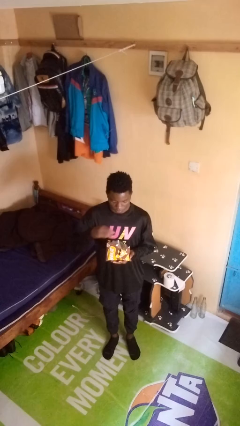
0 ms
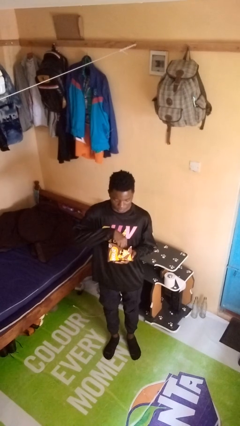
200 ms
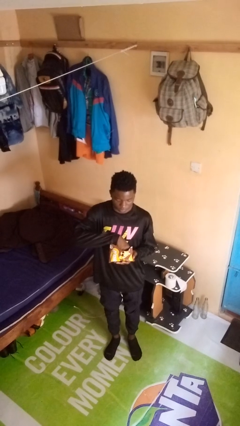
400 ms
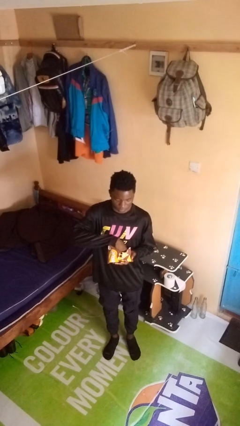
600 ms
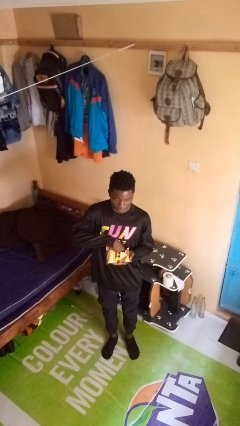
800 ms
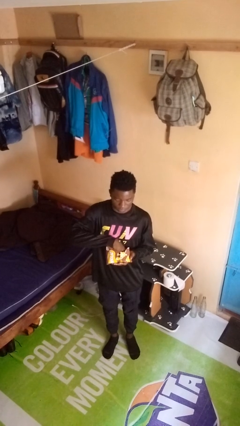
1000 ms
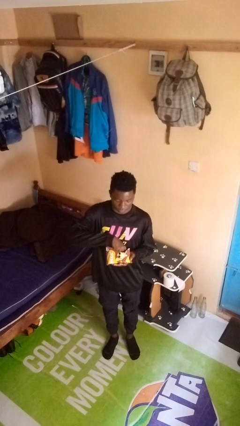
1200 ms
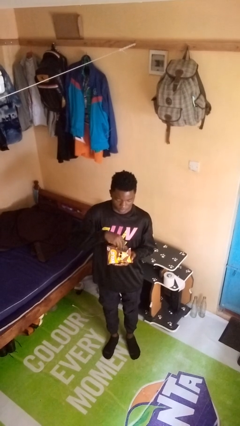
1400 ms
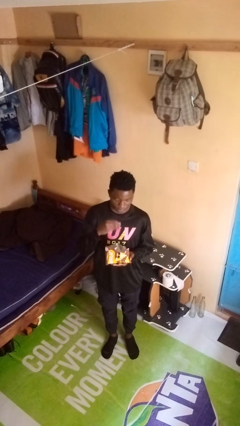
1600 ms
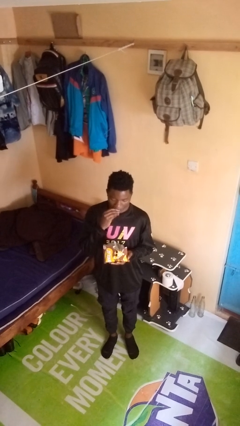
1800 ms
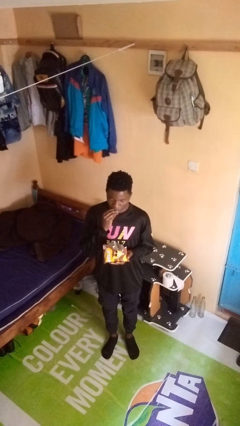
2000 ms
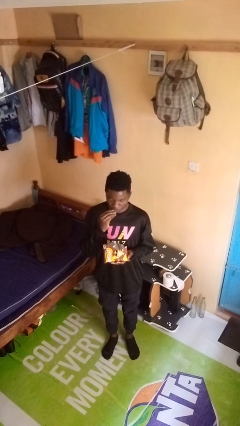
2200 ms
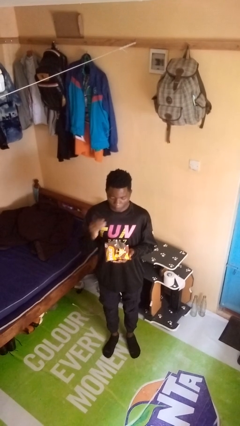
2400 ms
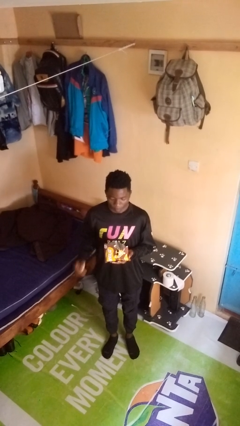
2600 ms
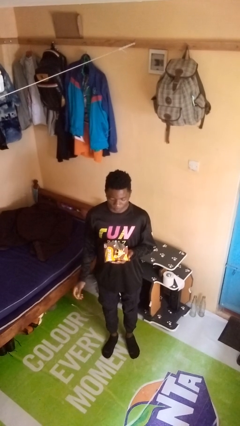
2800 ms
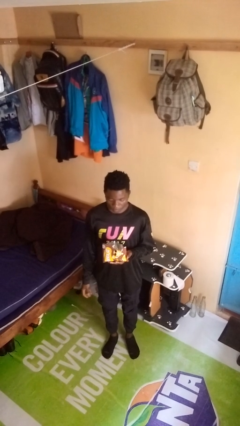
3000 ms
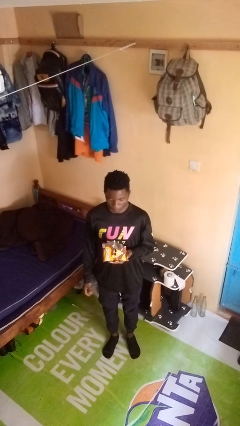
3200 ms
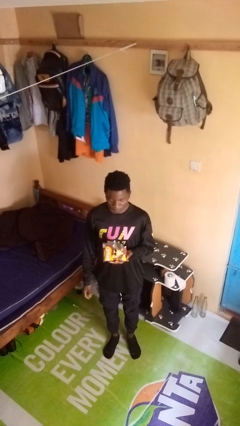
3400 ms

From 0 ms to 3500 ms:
person eats snack from bag

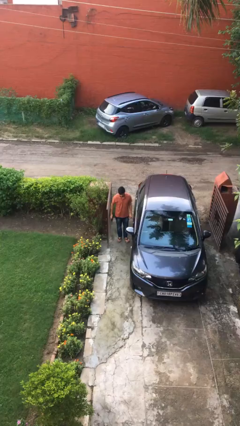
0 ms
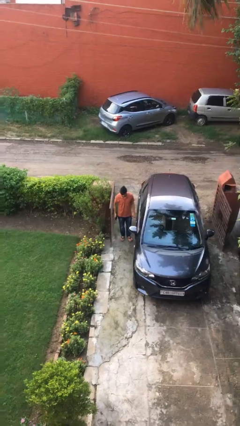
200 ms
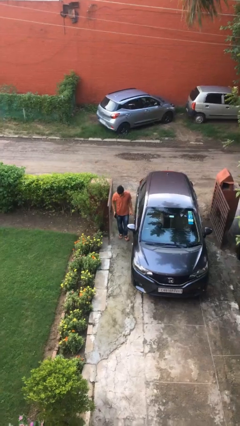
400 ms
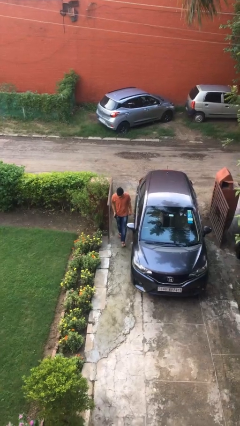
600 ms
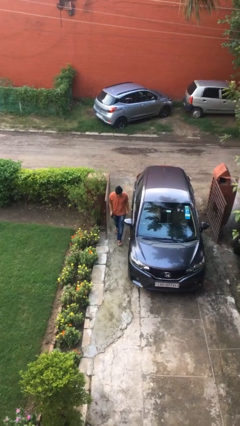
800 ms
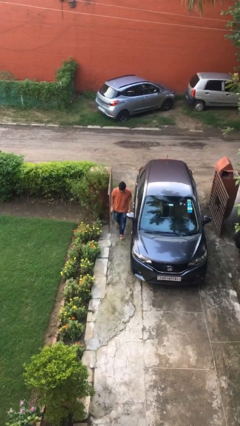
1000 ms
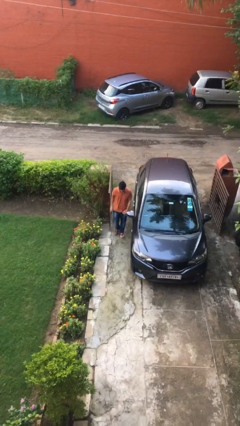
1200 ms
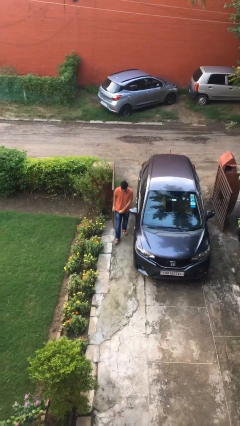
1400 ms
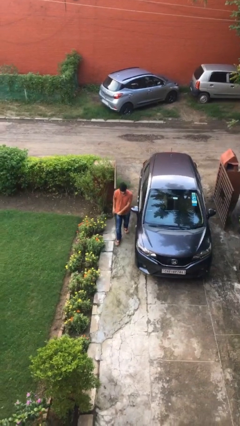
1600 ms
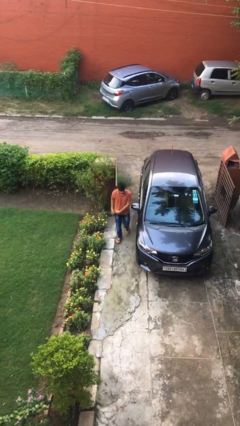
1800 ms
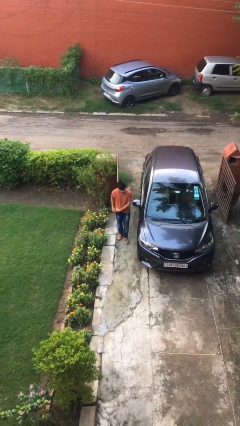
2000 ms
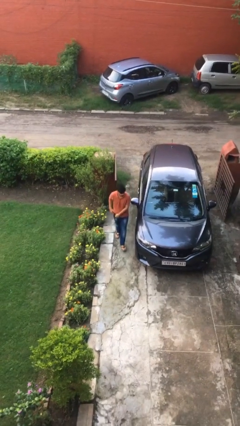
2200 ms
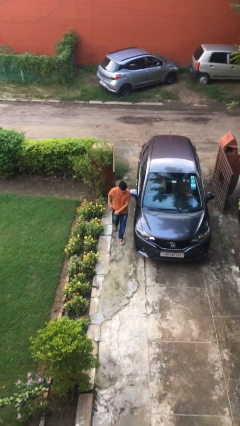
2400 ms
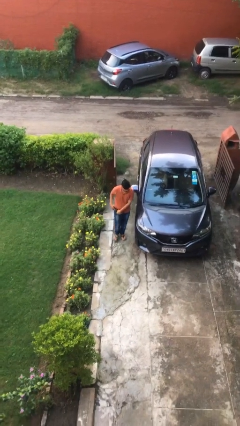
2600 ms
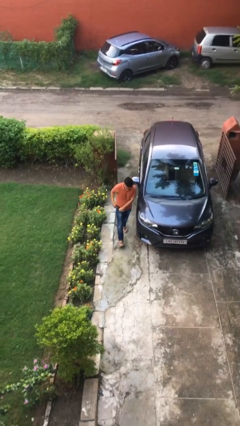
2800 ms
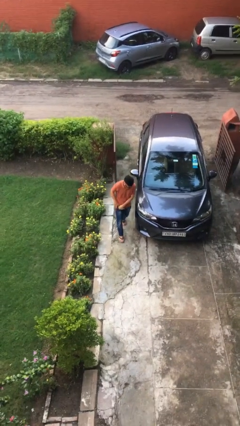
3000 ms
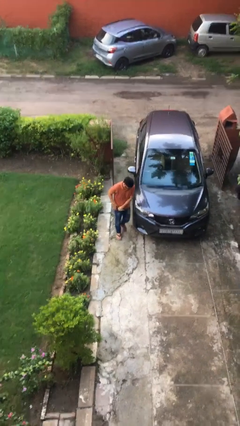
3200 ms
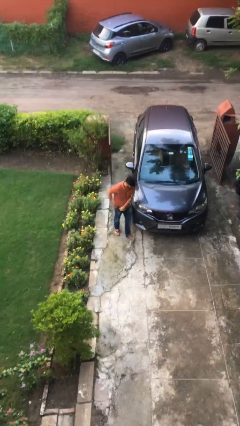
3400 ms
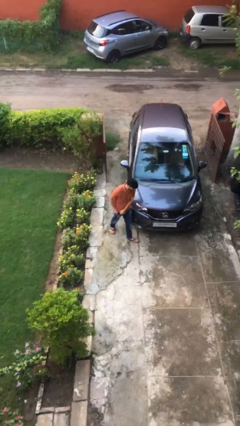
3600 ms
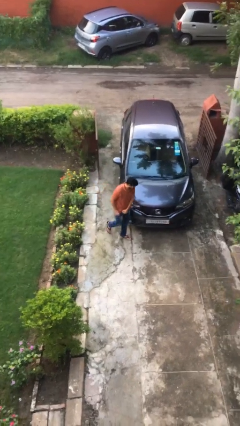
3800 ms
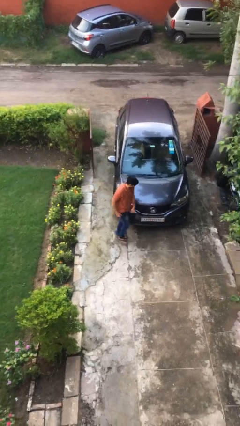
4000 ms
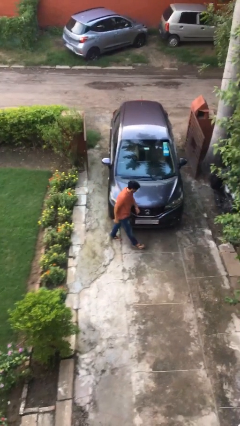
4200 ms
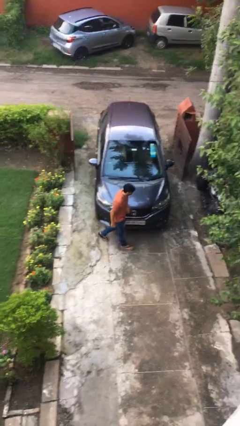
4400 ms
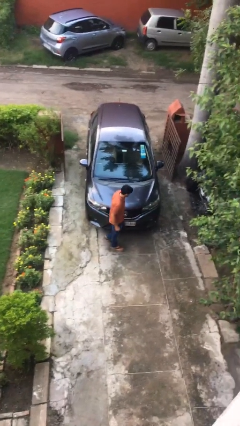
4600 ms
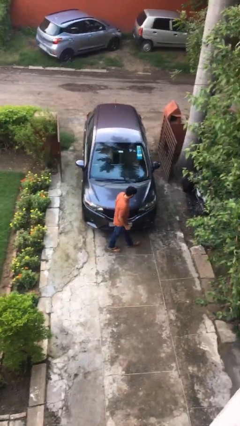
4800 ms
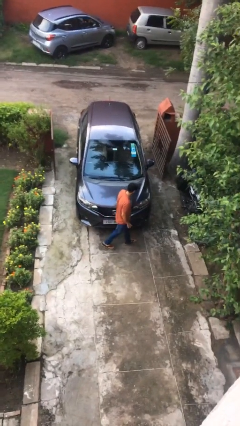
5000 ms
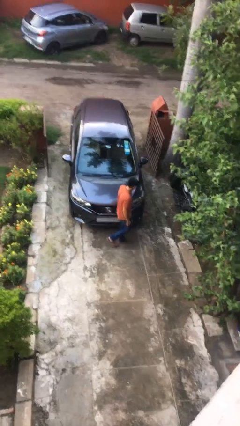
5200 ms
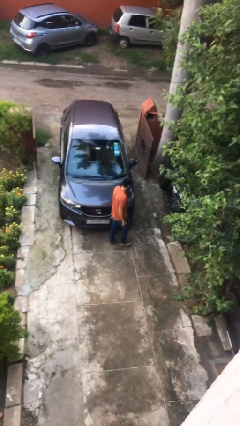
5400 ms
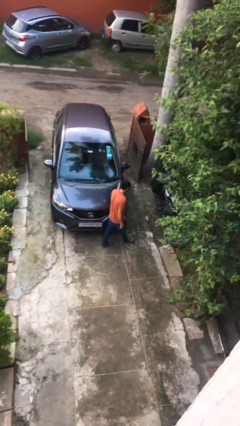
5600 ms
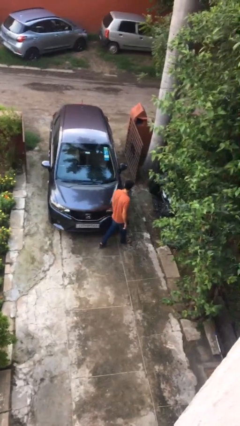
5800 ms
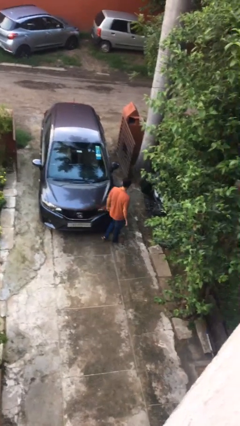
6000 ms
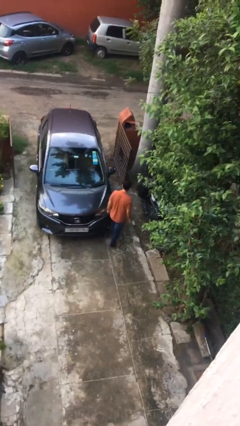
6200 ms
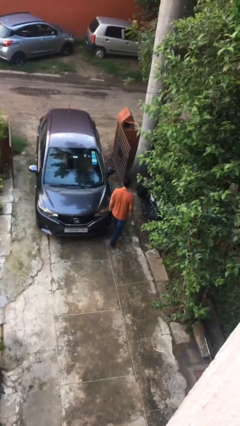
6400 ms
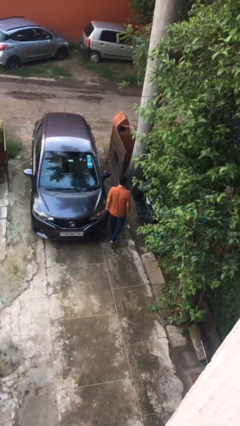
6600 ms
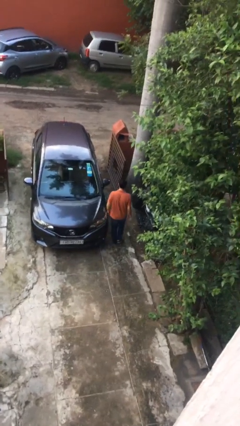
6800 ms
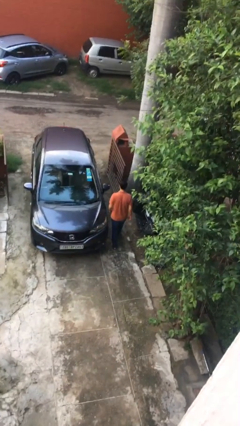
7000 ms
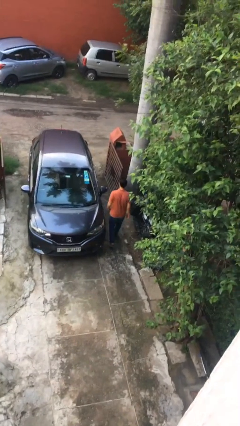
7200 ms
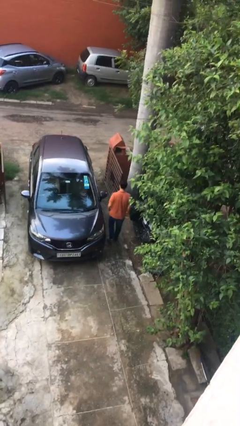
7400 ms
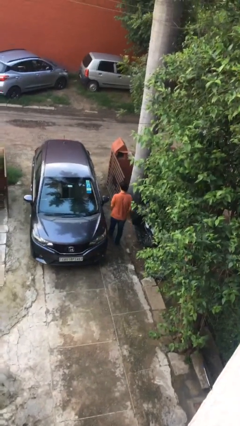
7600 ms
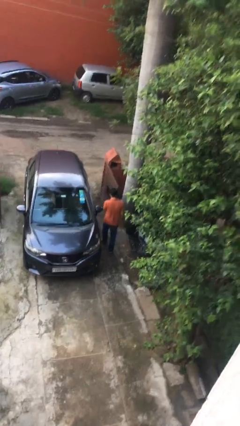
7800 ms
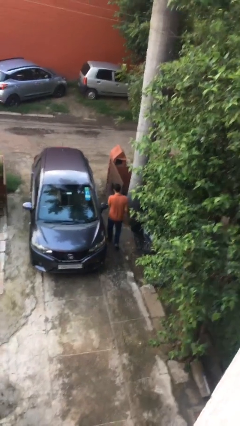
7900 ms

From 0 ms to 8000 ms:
person walks around car

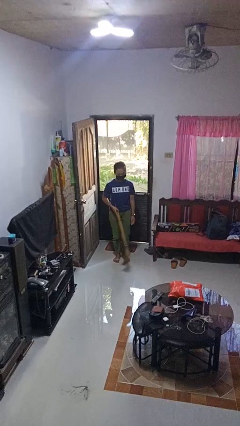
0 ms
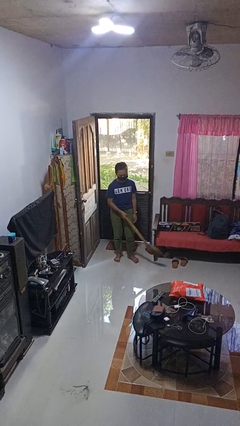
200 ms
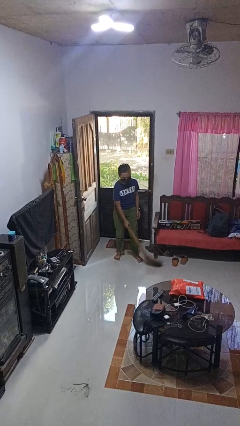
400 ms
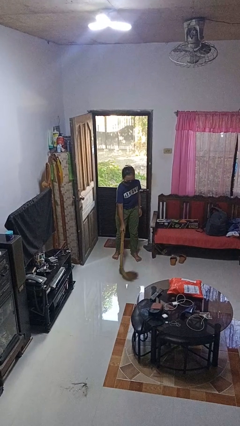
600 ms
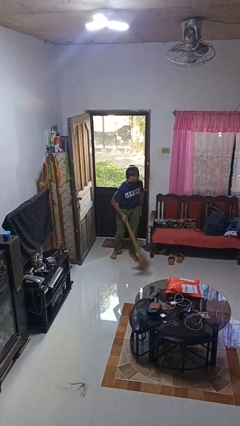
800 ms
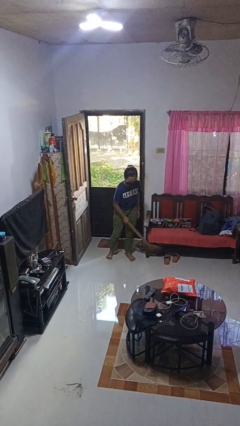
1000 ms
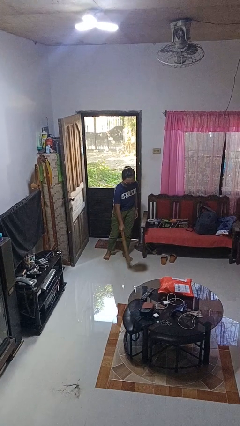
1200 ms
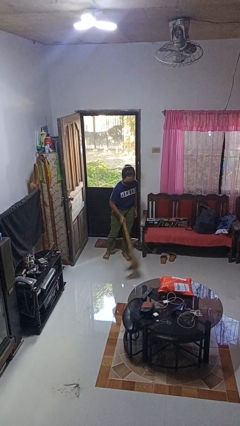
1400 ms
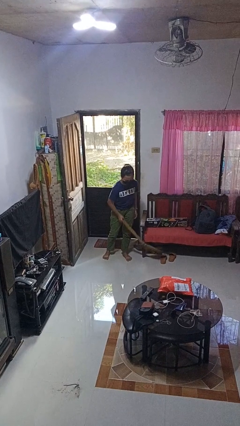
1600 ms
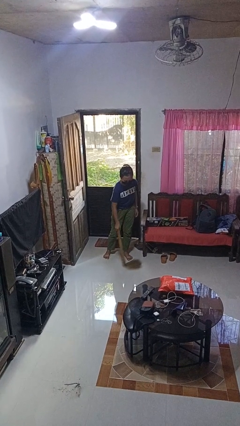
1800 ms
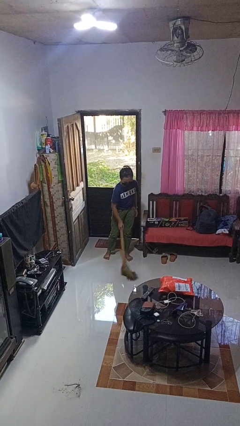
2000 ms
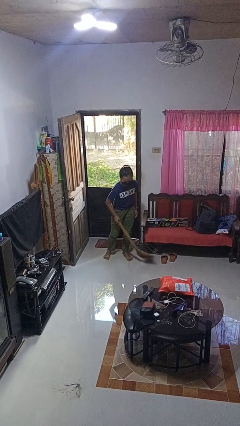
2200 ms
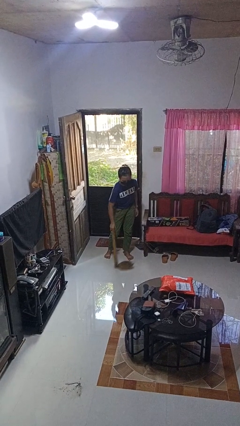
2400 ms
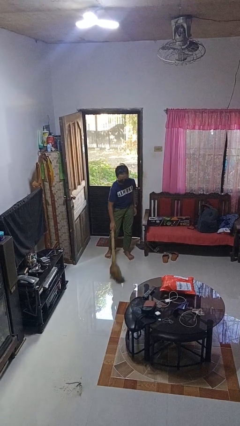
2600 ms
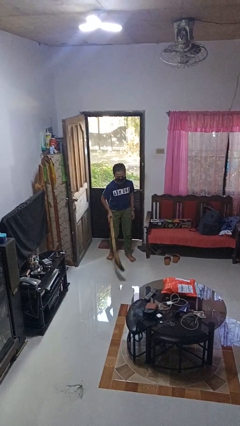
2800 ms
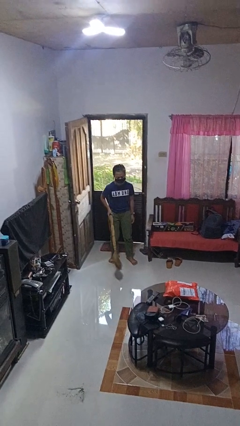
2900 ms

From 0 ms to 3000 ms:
person sweeps floor

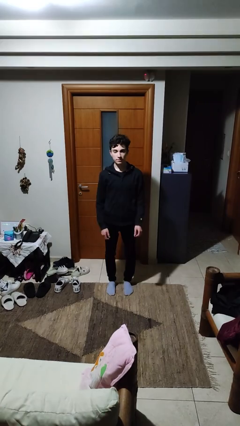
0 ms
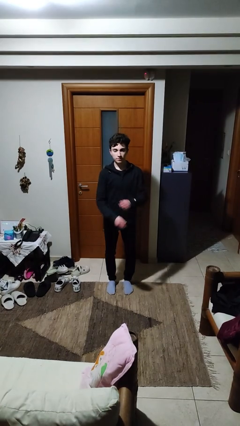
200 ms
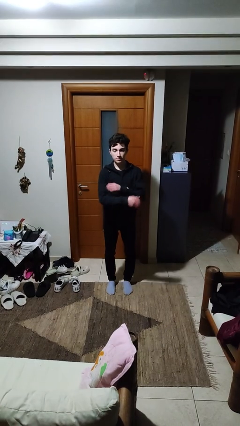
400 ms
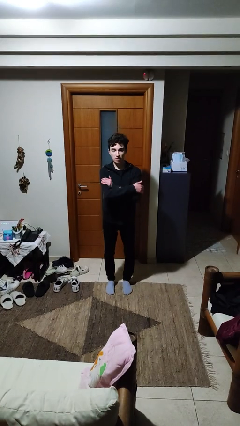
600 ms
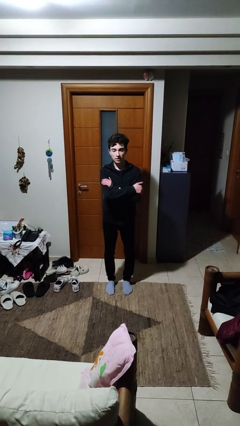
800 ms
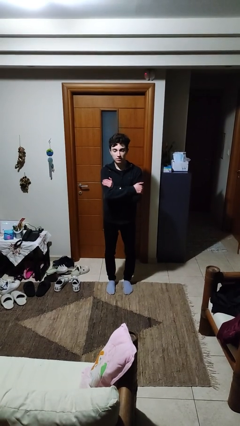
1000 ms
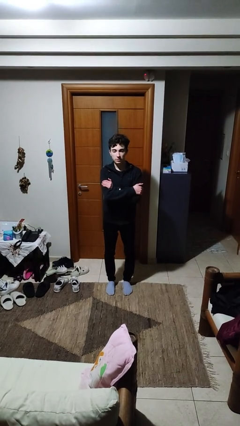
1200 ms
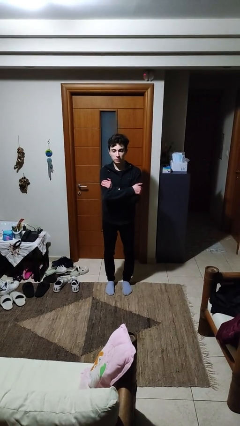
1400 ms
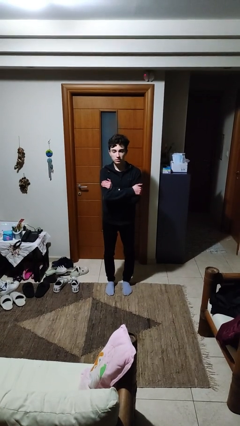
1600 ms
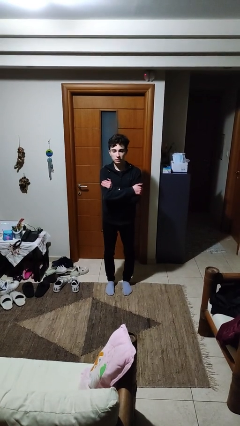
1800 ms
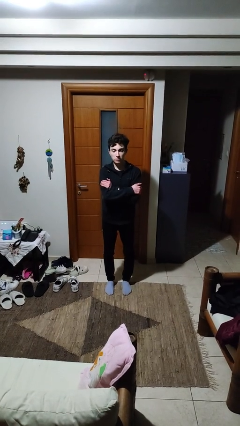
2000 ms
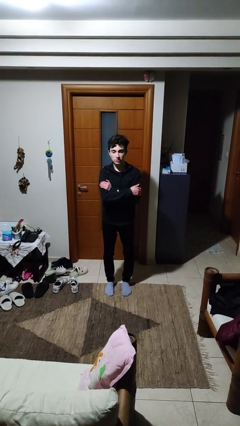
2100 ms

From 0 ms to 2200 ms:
person crosses arms

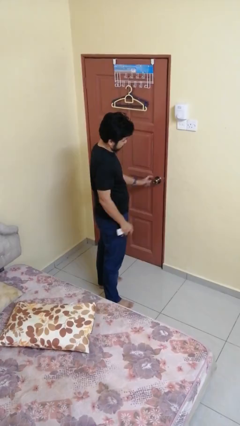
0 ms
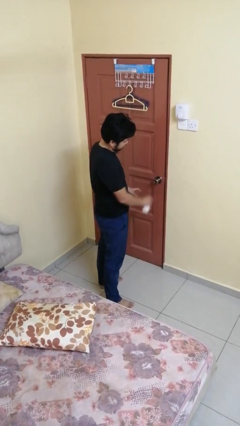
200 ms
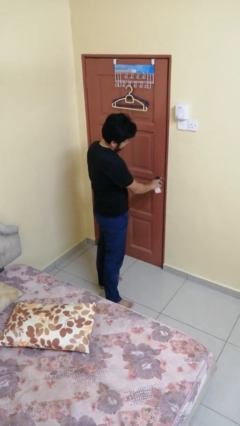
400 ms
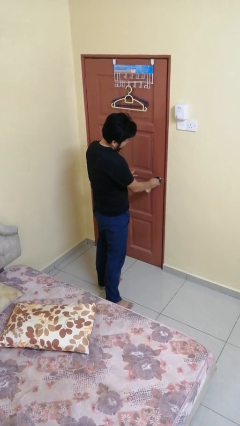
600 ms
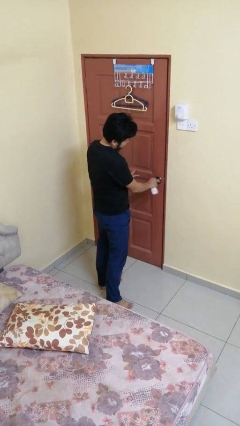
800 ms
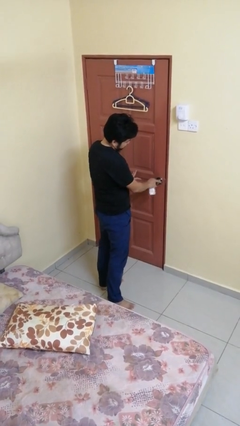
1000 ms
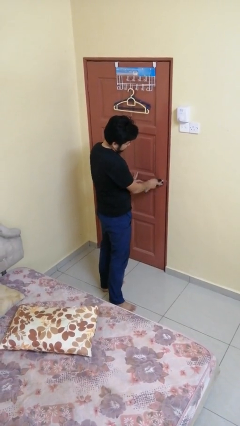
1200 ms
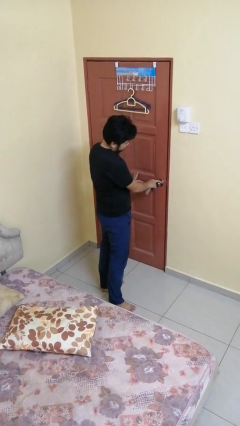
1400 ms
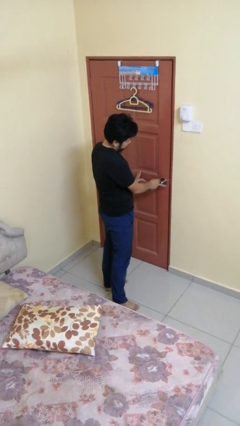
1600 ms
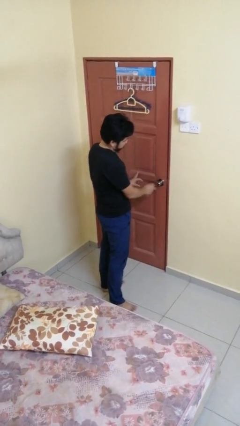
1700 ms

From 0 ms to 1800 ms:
person locks door with keys
